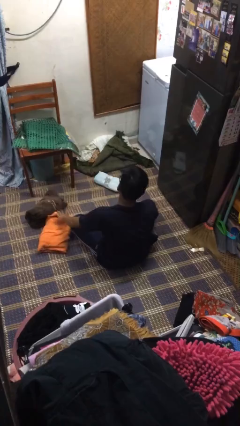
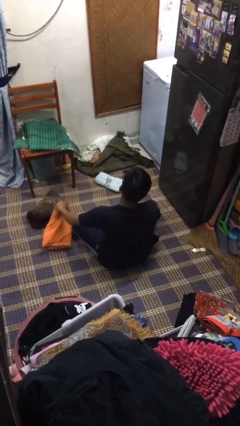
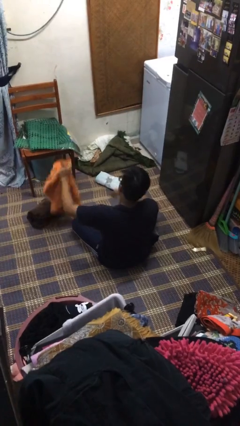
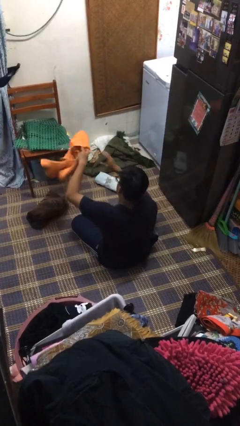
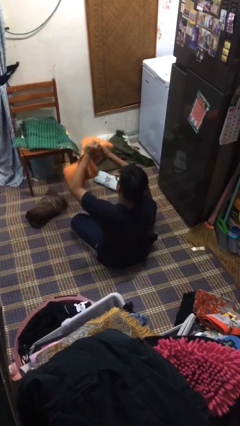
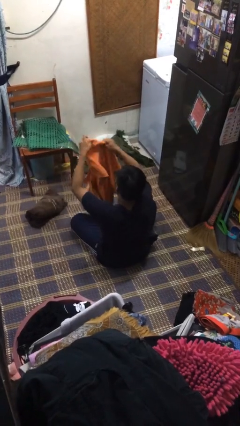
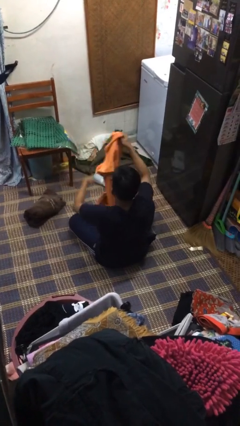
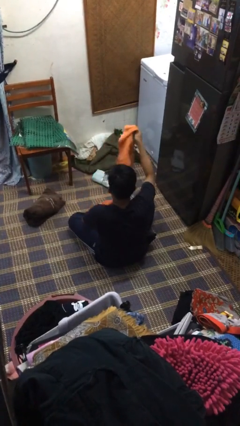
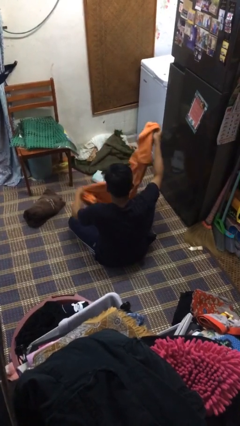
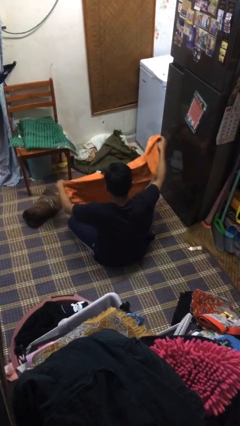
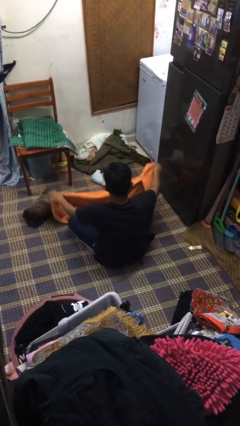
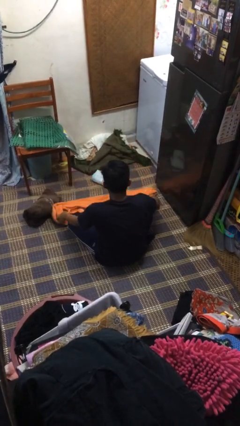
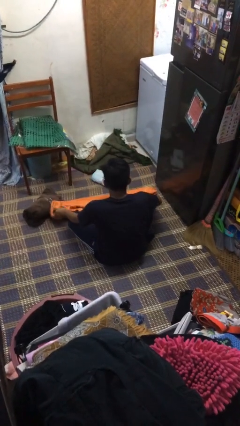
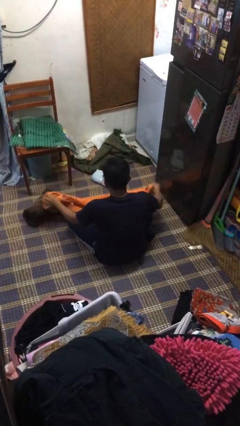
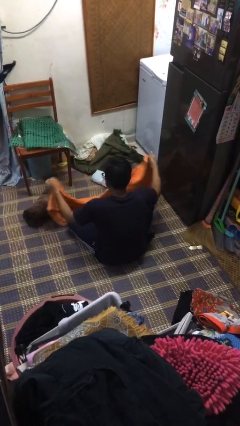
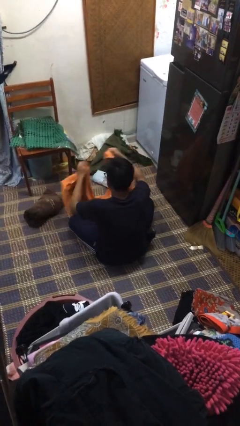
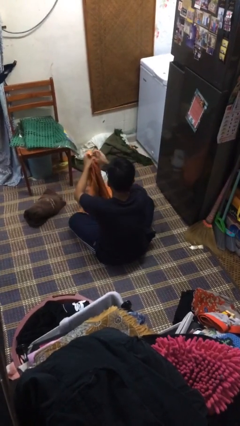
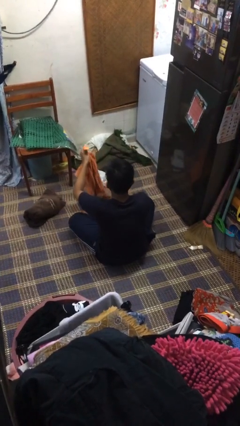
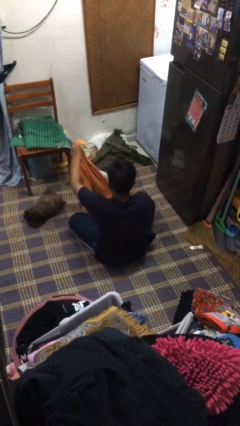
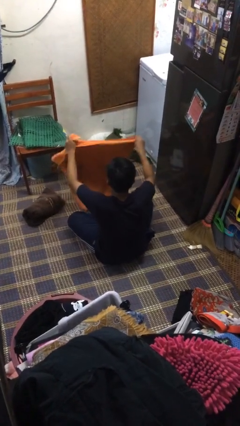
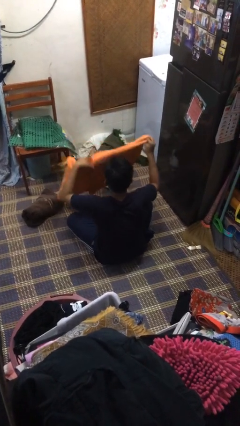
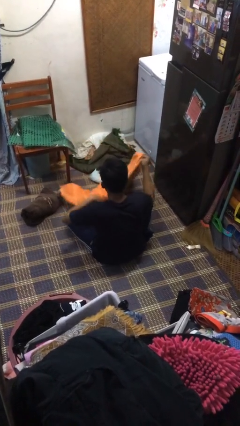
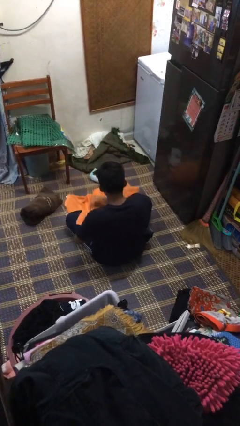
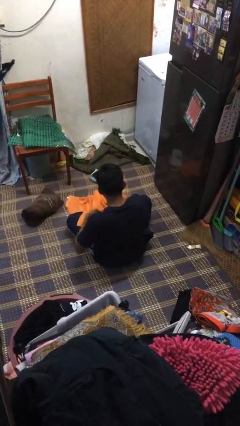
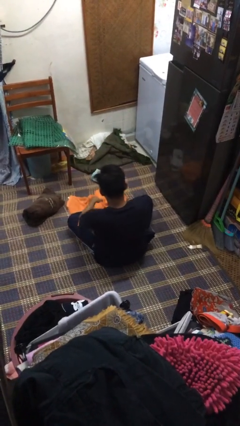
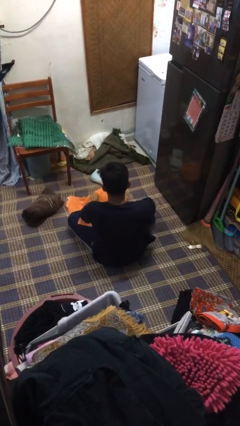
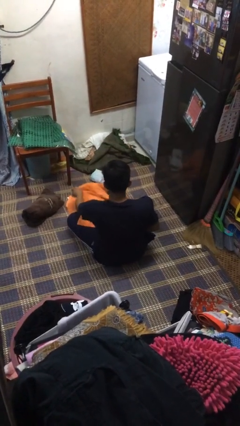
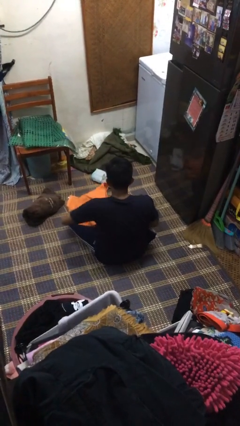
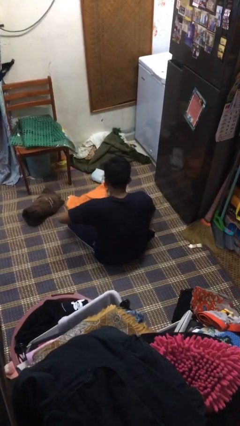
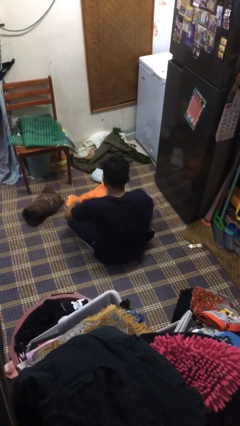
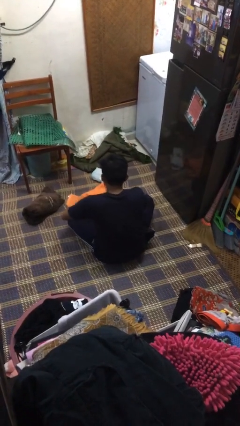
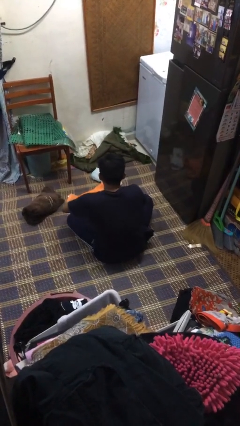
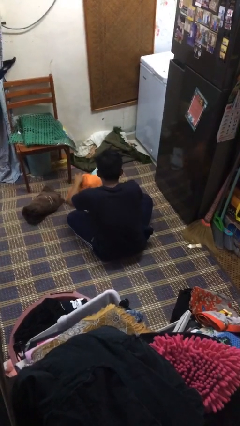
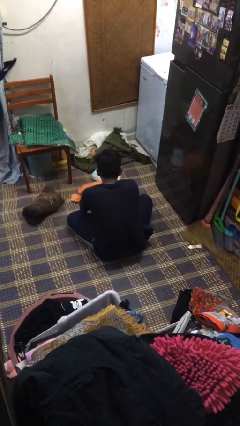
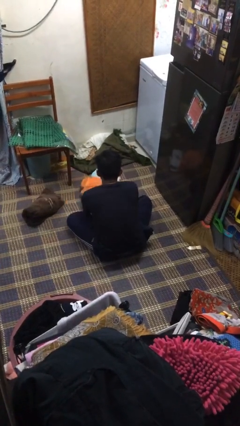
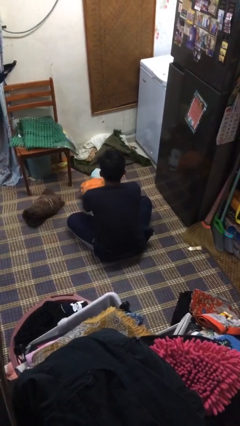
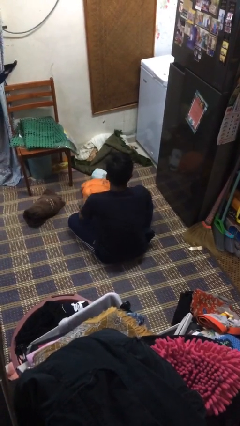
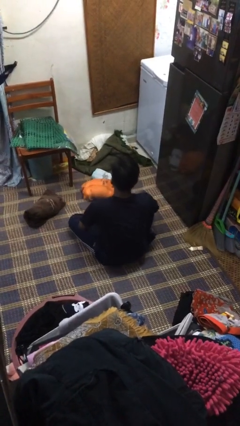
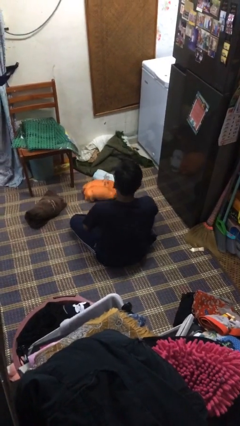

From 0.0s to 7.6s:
person folds towel

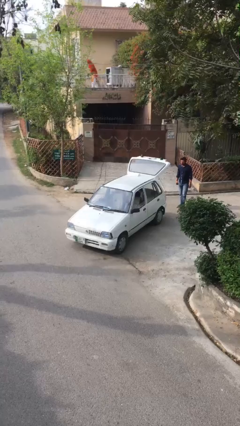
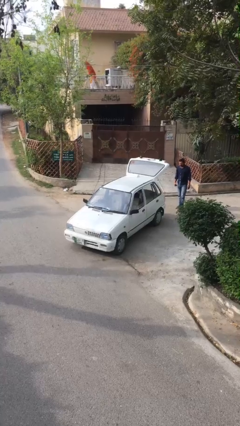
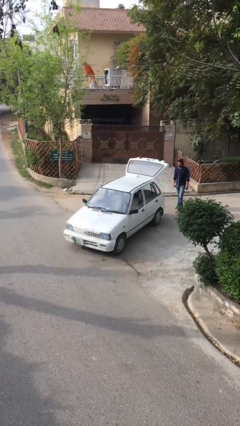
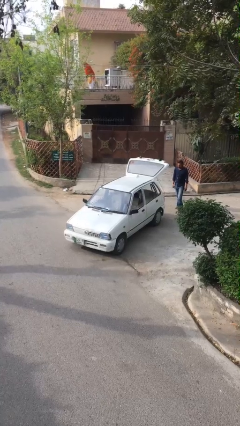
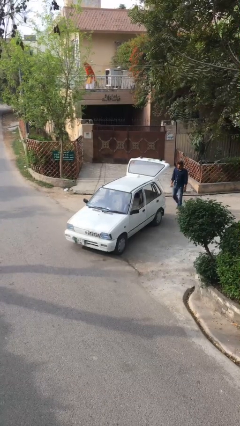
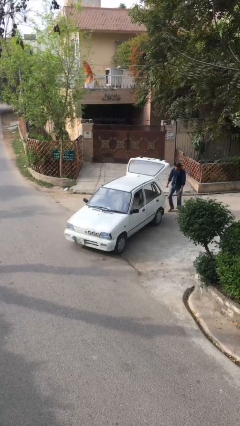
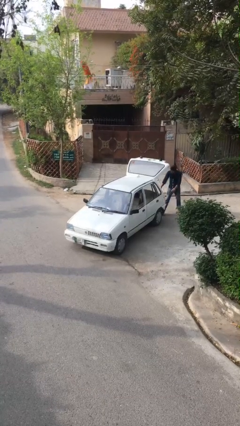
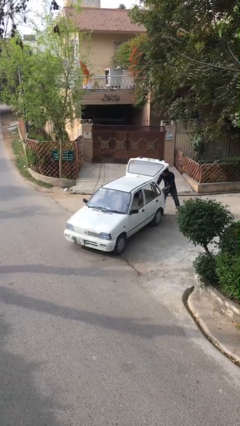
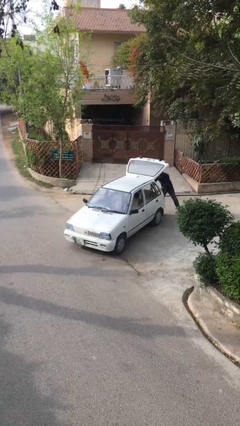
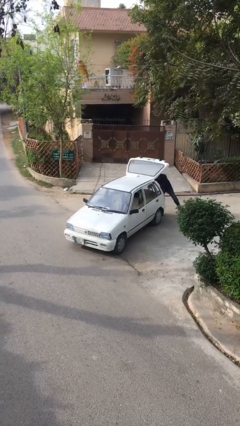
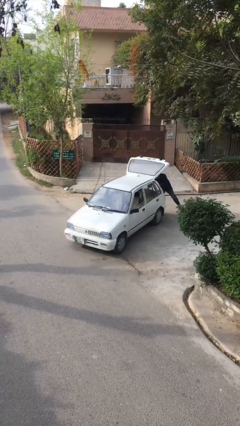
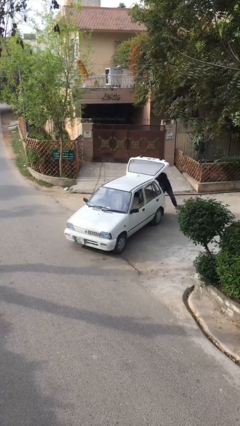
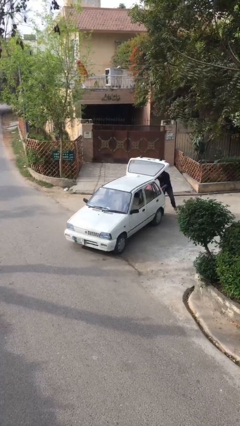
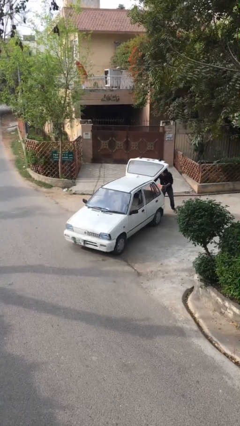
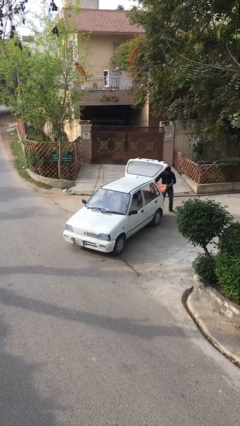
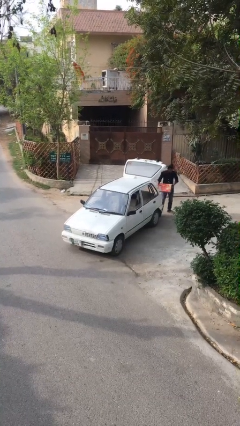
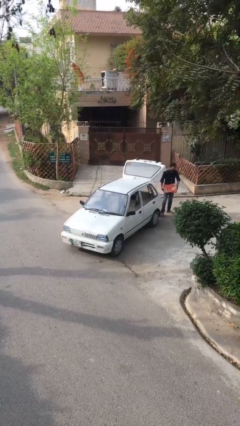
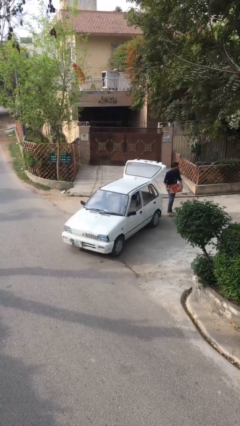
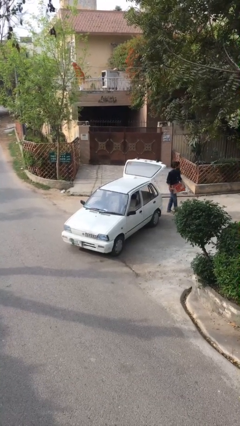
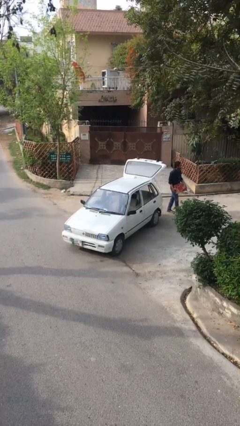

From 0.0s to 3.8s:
person unloads car

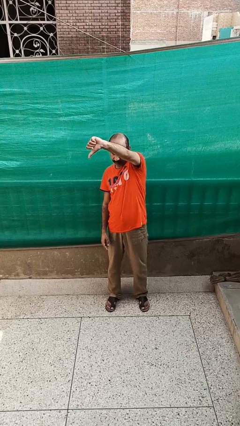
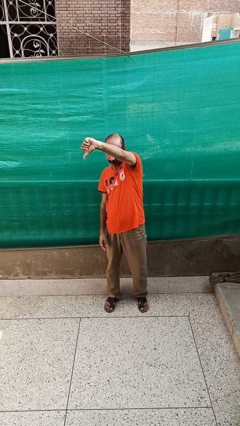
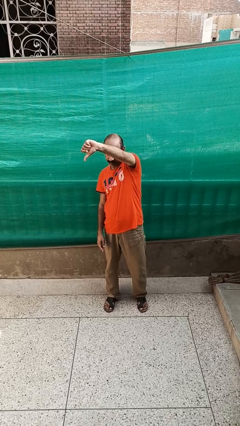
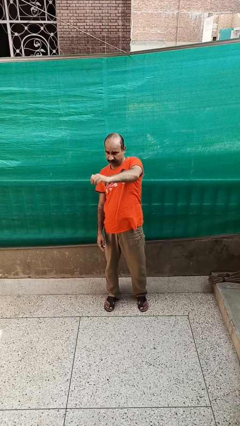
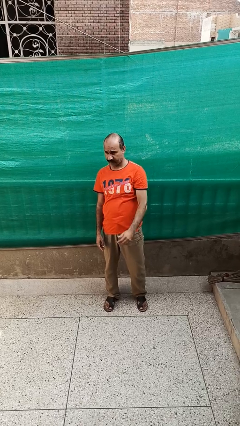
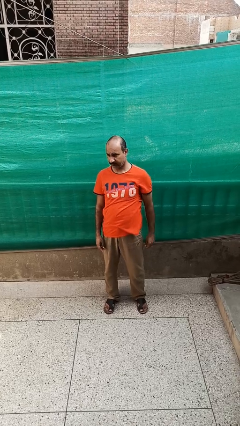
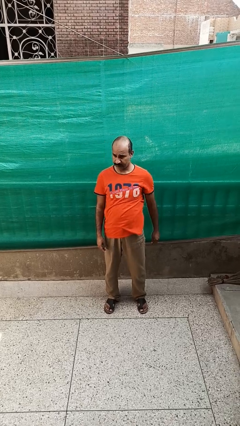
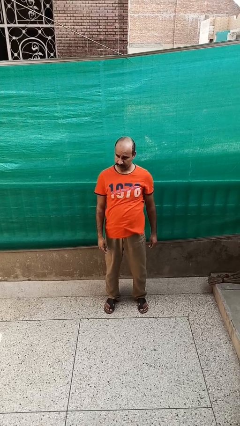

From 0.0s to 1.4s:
person gestures thumbs down

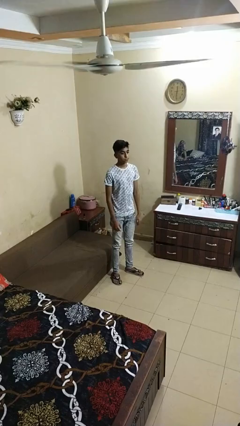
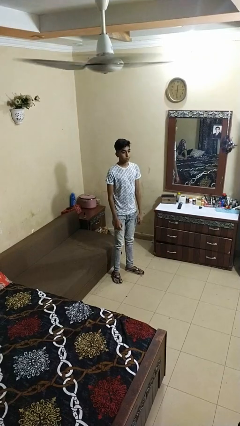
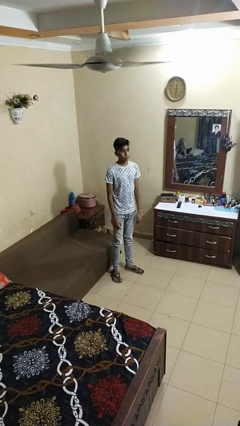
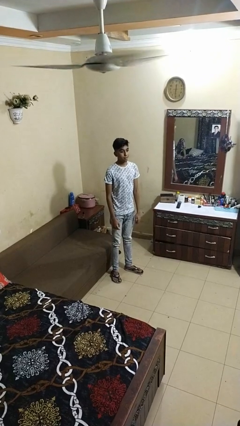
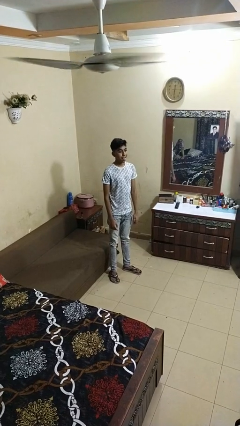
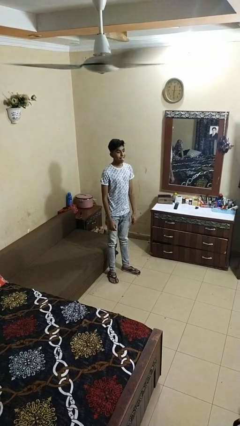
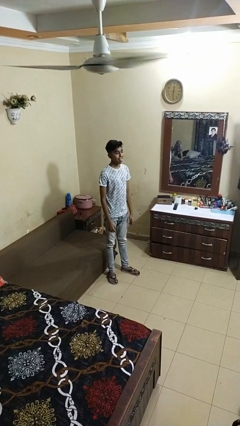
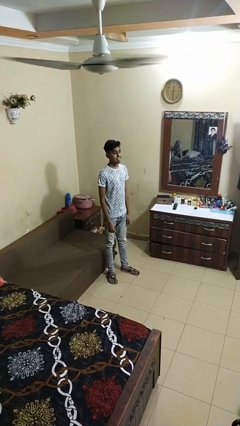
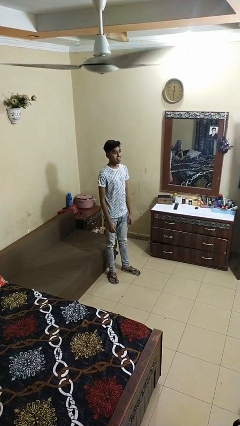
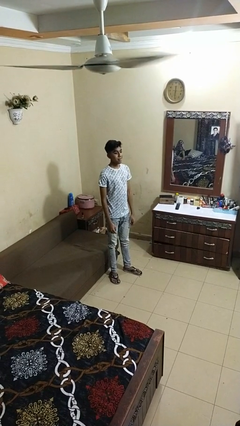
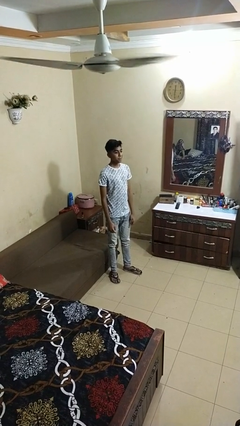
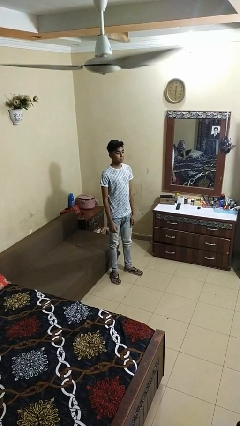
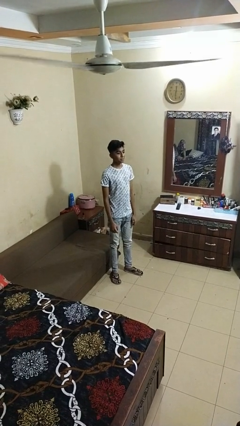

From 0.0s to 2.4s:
person sticks out tongue

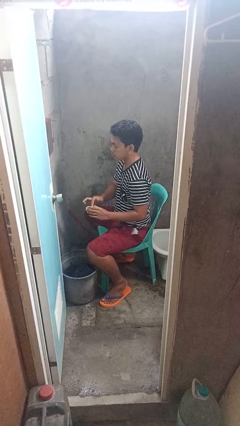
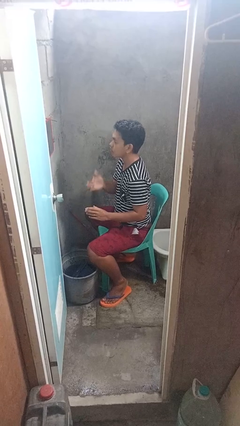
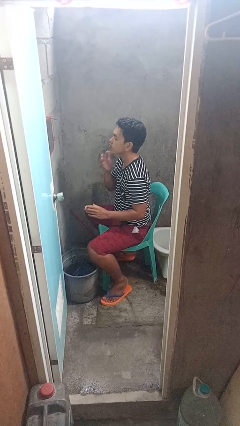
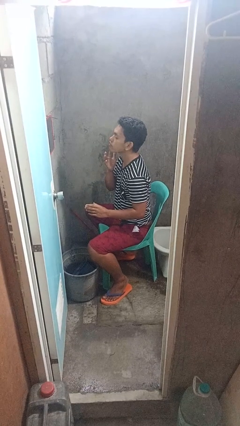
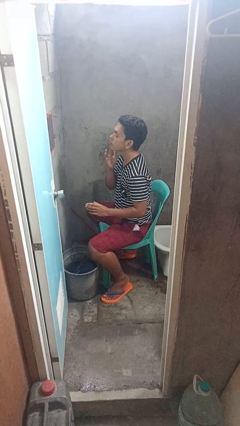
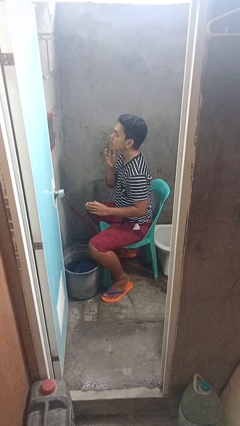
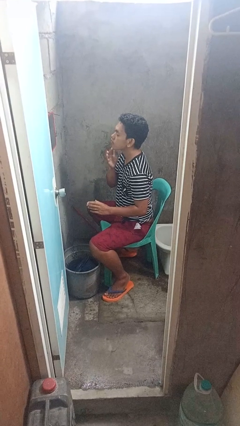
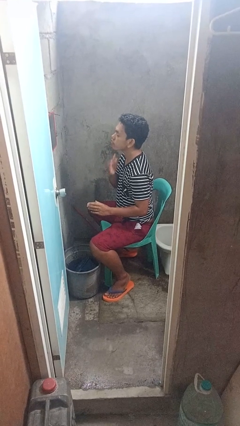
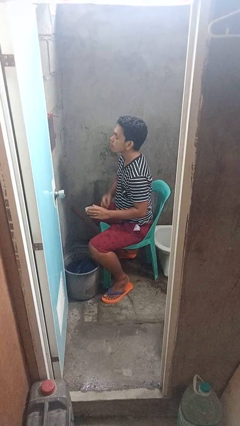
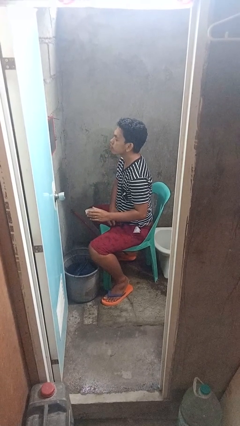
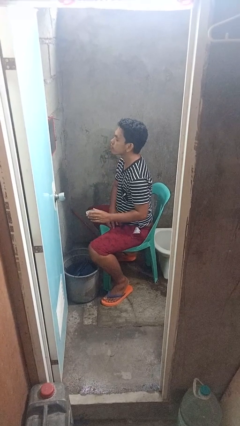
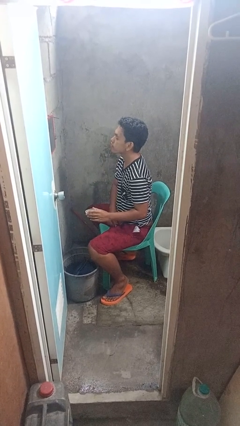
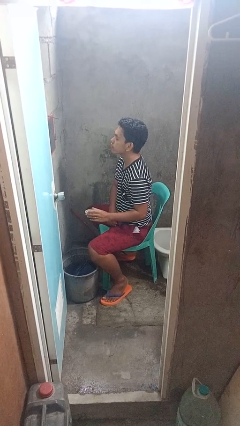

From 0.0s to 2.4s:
person applies shaving cream
